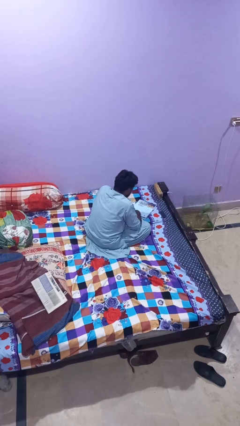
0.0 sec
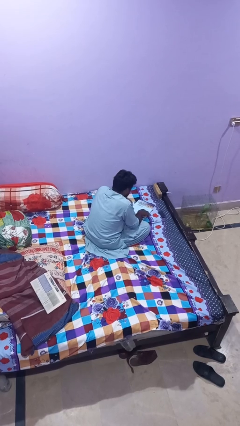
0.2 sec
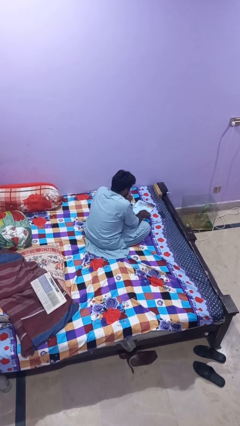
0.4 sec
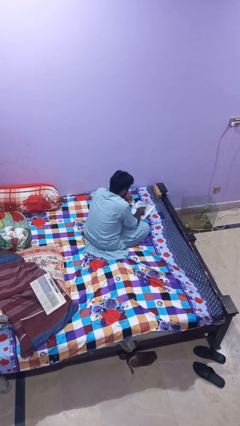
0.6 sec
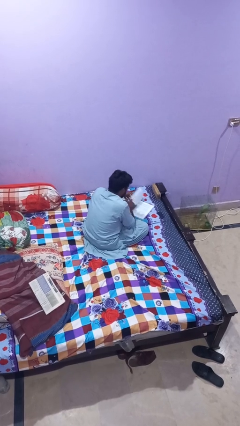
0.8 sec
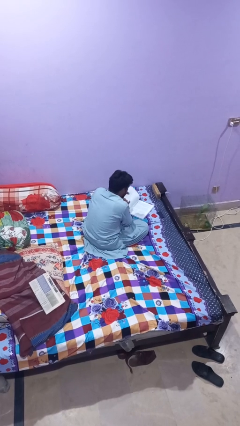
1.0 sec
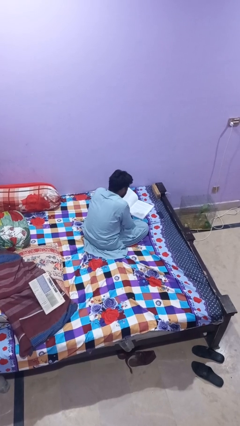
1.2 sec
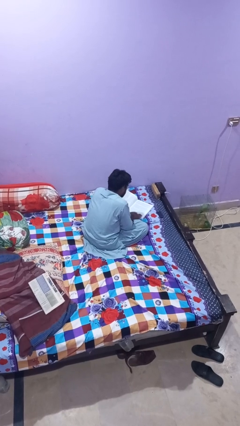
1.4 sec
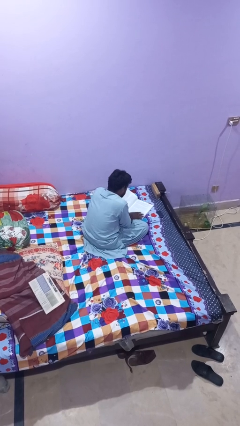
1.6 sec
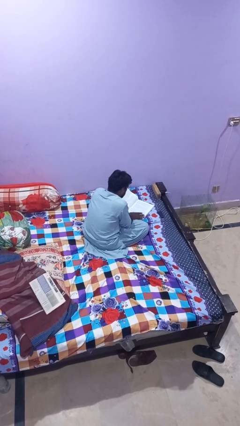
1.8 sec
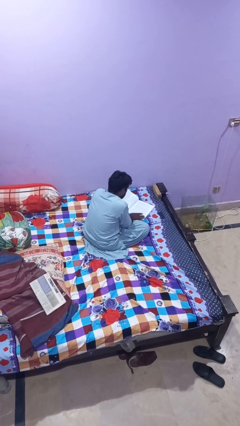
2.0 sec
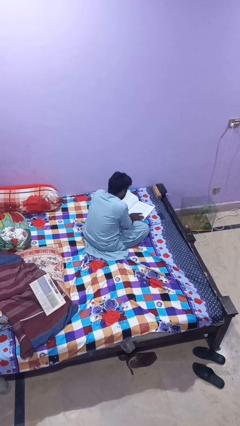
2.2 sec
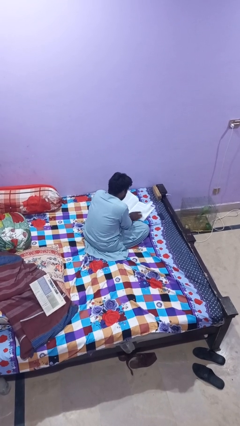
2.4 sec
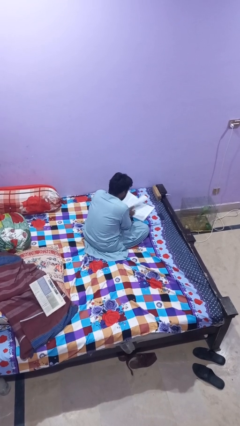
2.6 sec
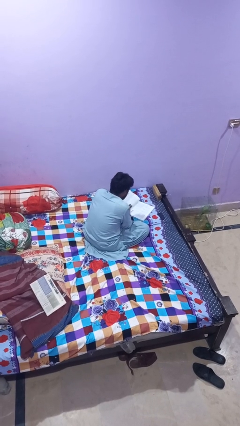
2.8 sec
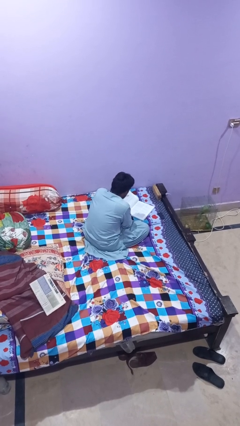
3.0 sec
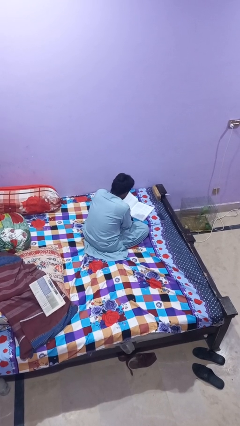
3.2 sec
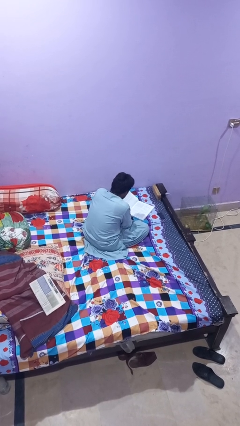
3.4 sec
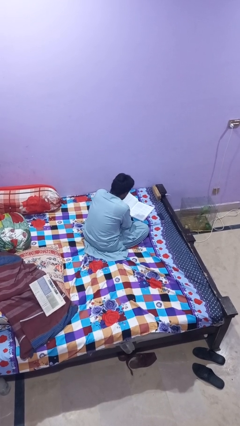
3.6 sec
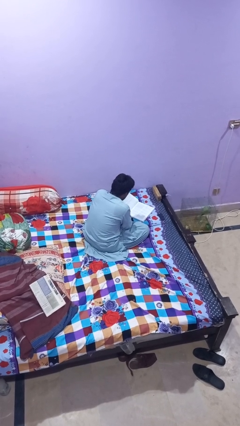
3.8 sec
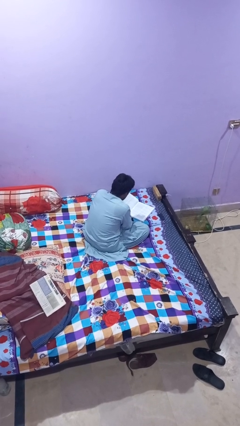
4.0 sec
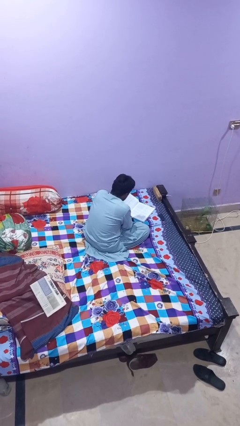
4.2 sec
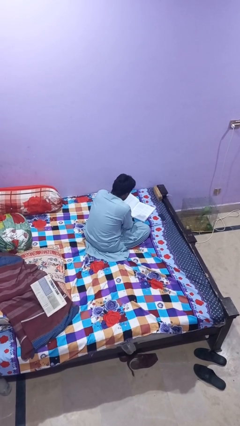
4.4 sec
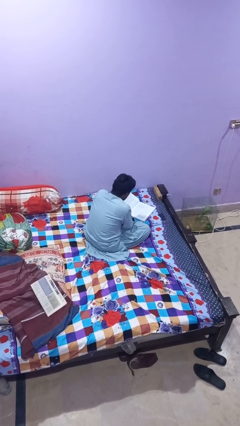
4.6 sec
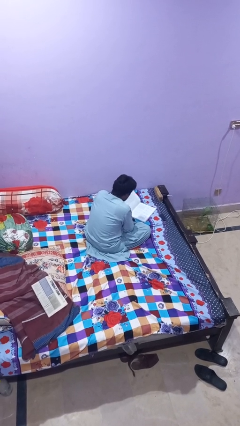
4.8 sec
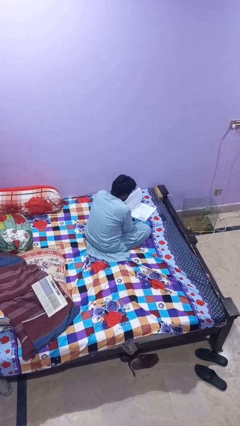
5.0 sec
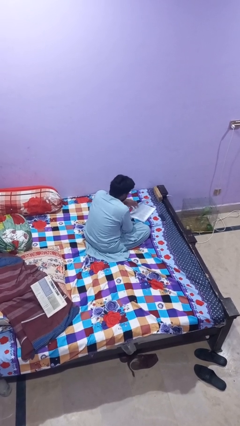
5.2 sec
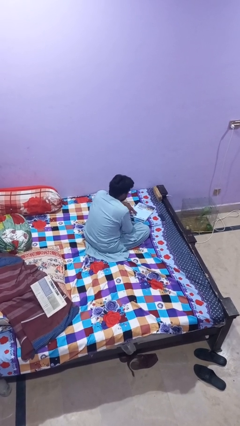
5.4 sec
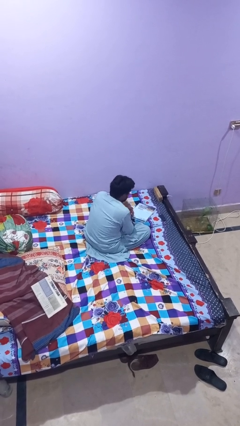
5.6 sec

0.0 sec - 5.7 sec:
person reads book

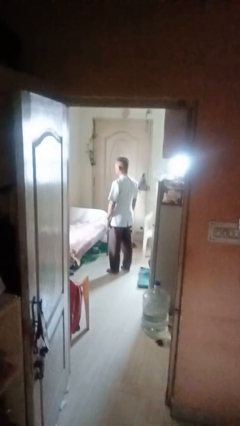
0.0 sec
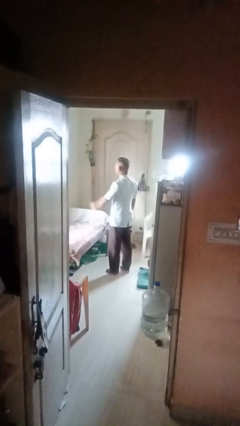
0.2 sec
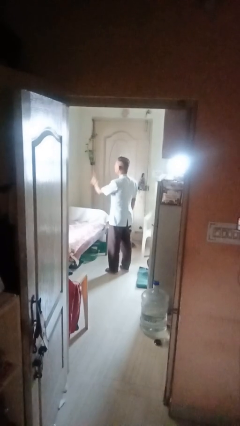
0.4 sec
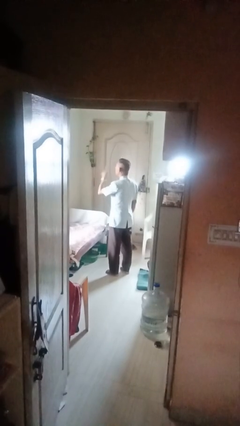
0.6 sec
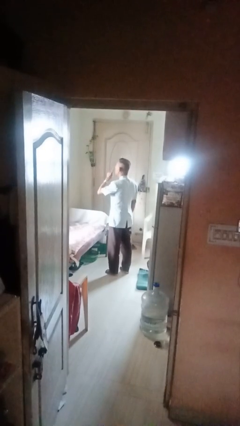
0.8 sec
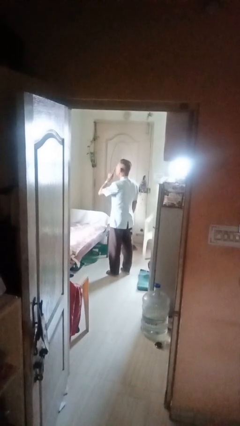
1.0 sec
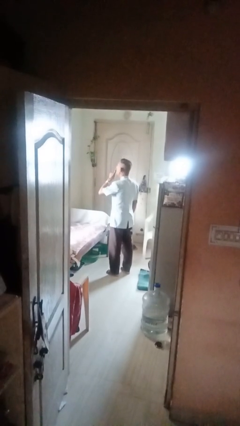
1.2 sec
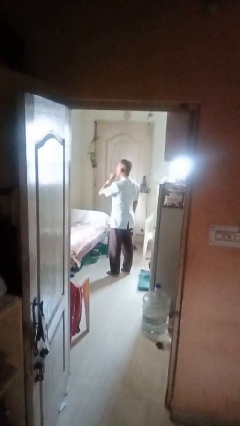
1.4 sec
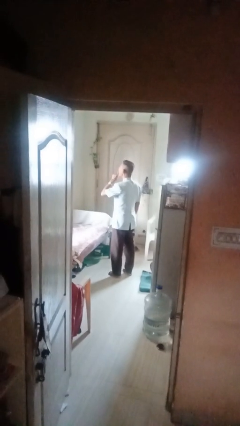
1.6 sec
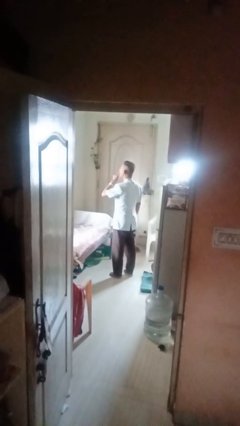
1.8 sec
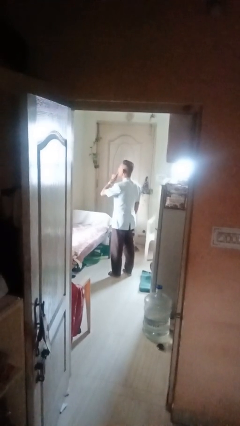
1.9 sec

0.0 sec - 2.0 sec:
person gestures be quiet

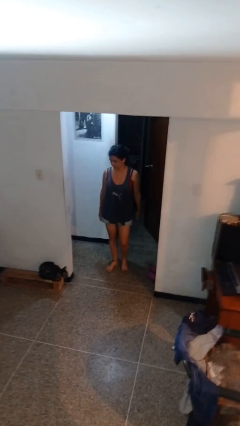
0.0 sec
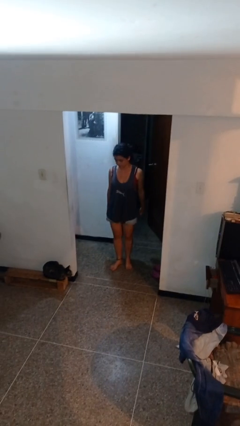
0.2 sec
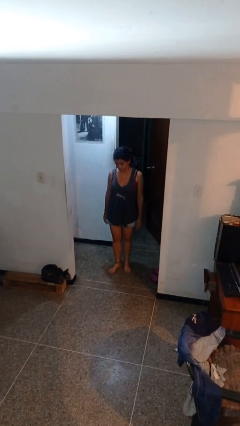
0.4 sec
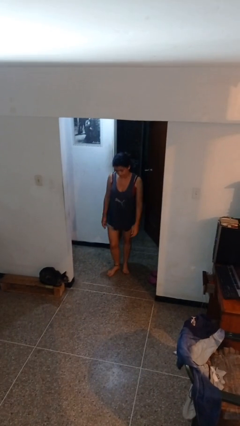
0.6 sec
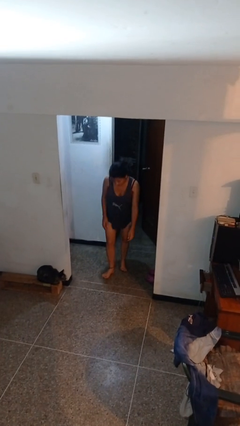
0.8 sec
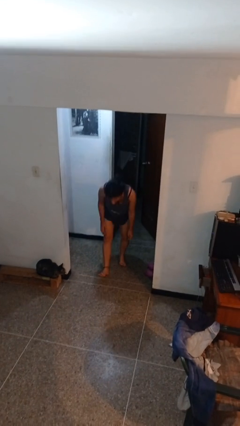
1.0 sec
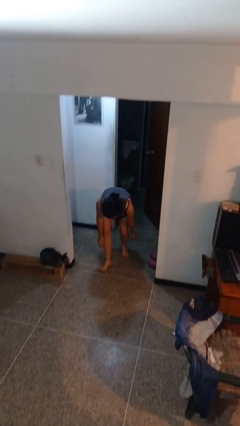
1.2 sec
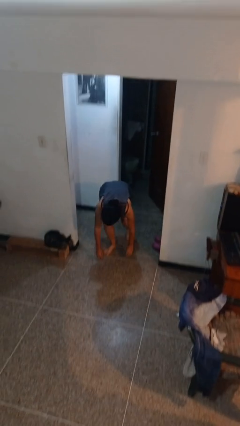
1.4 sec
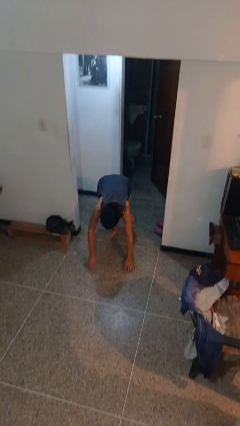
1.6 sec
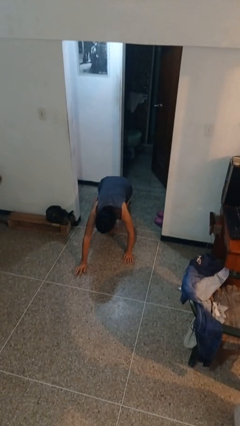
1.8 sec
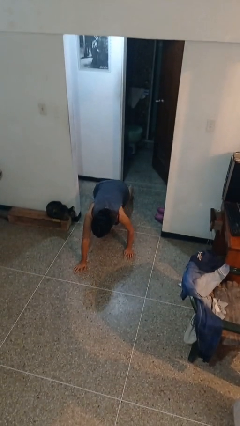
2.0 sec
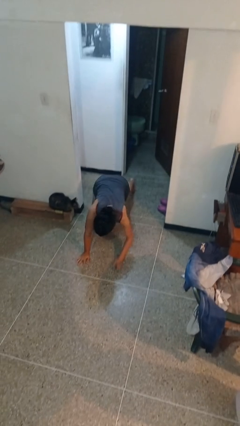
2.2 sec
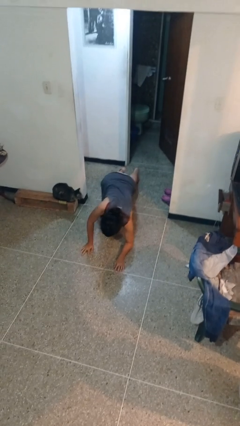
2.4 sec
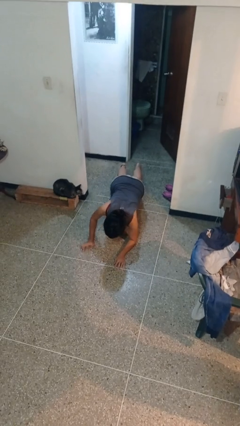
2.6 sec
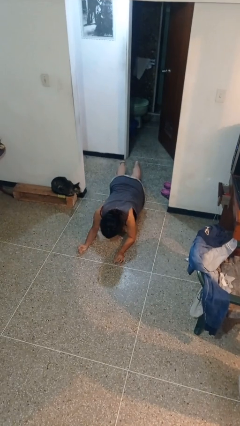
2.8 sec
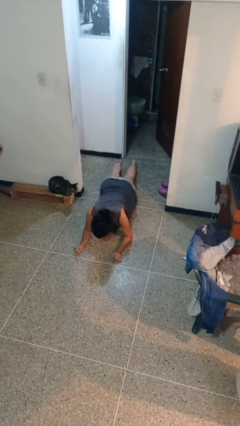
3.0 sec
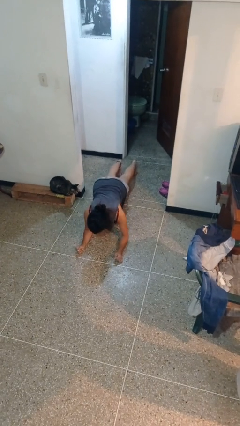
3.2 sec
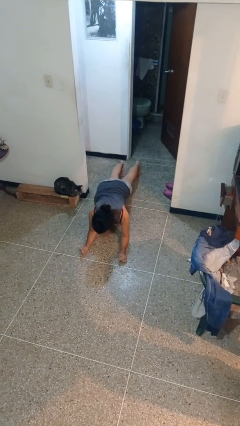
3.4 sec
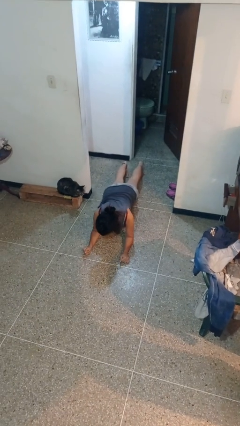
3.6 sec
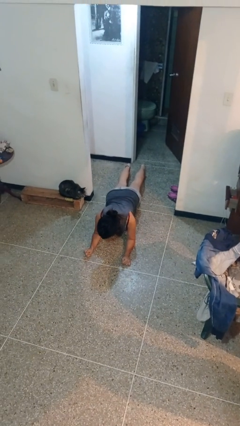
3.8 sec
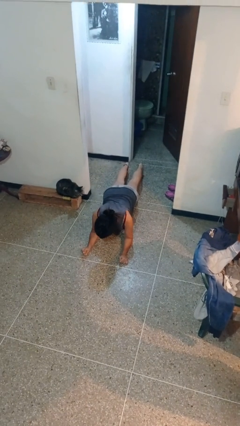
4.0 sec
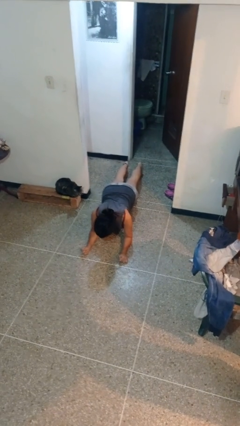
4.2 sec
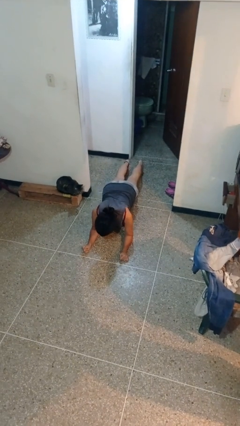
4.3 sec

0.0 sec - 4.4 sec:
person exercises with plank

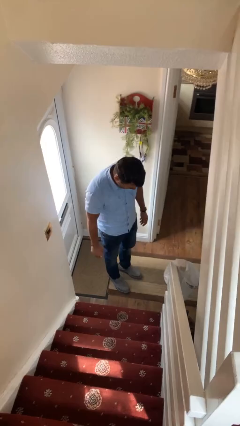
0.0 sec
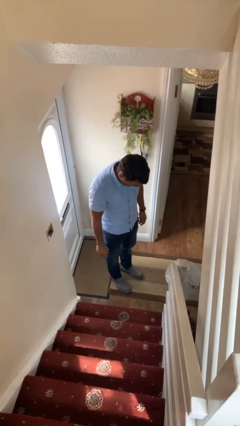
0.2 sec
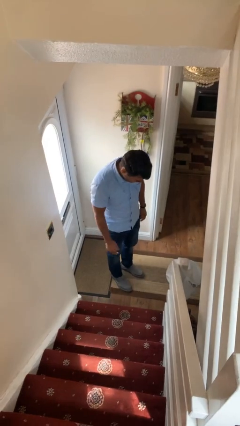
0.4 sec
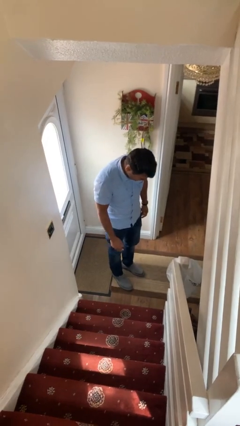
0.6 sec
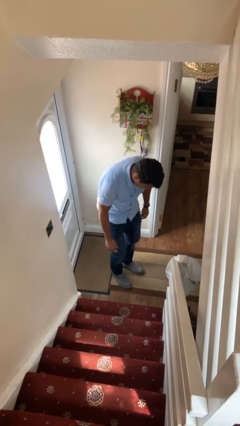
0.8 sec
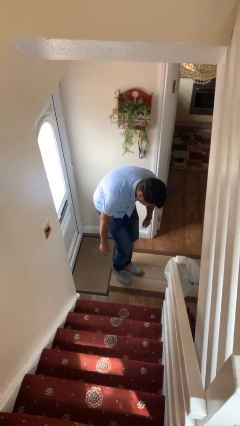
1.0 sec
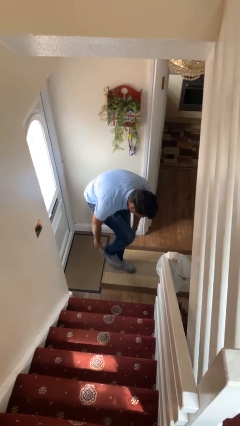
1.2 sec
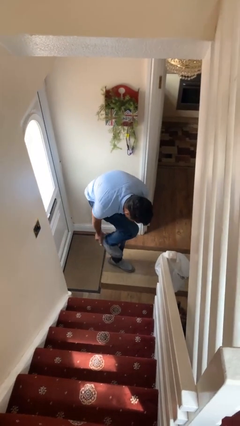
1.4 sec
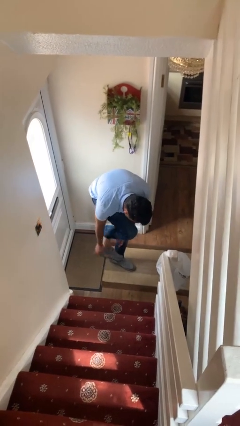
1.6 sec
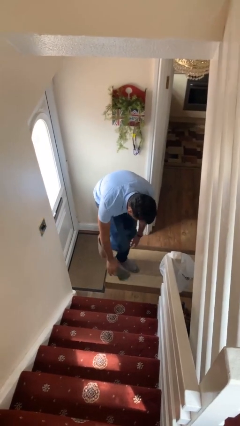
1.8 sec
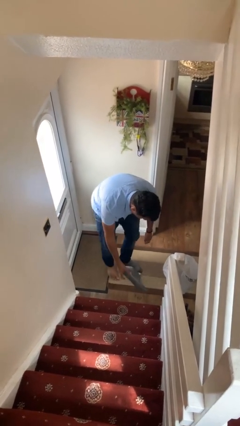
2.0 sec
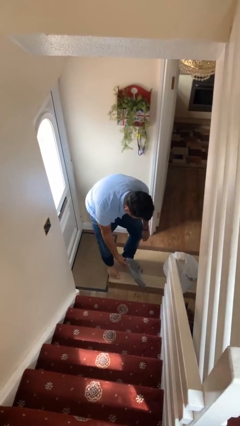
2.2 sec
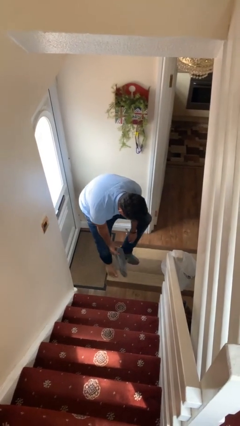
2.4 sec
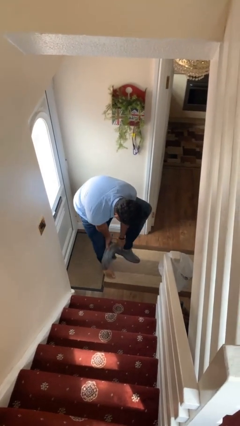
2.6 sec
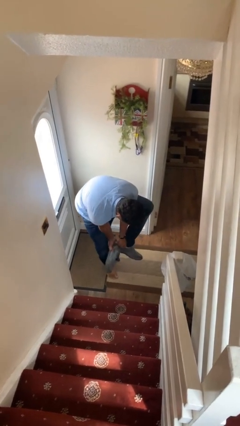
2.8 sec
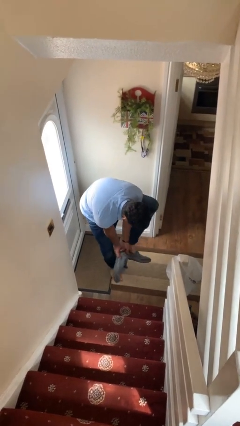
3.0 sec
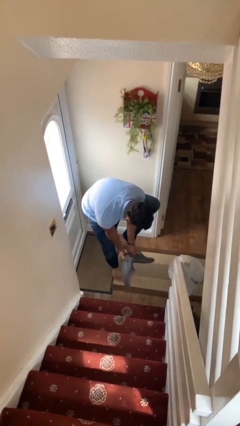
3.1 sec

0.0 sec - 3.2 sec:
person takes off shoes

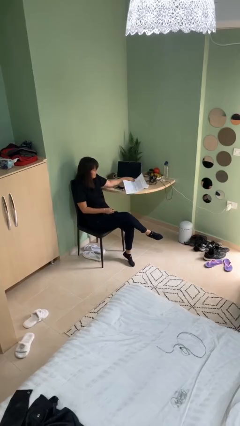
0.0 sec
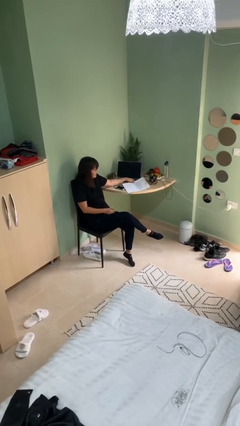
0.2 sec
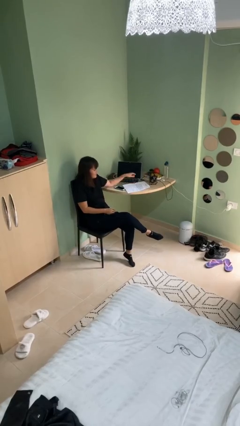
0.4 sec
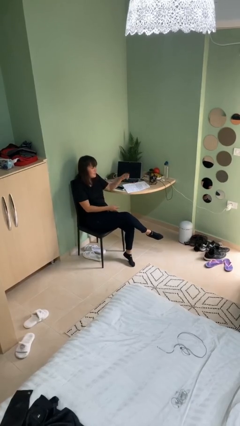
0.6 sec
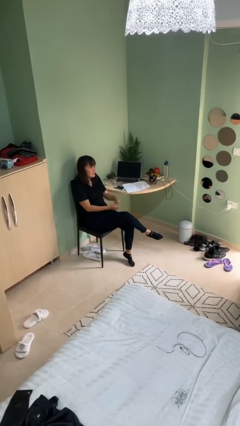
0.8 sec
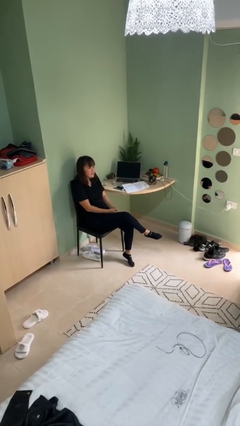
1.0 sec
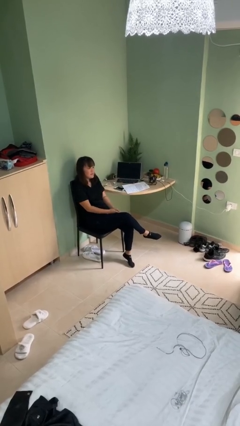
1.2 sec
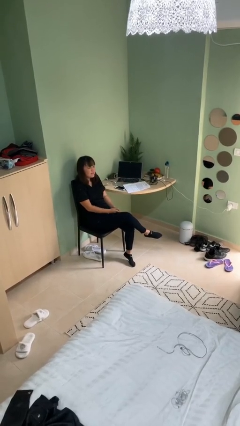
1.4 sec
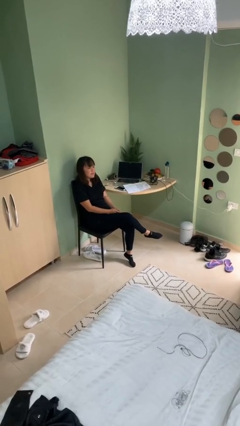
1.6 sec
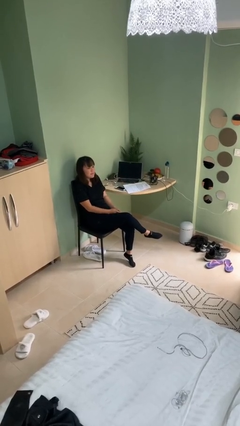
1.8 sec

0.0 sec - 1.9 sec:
person puts down object on table
